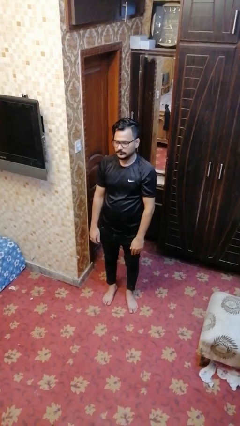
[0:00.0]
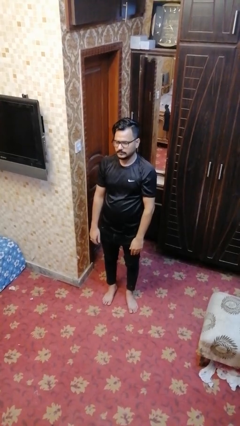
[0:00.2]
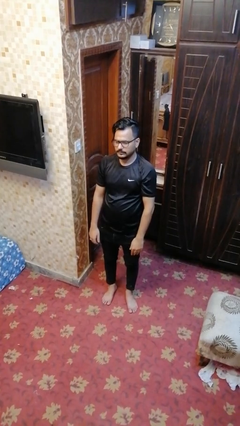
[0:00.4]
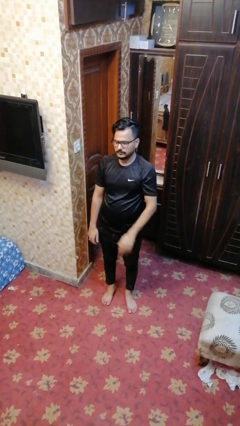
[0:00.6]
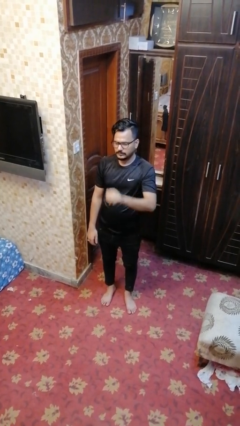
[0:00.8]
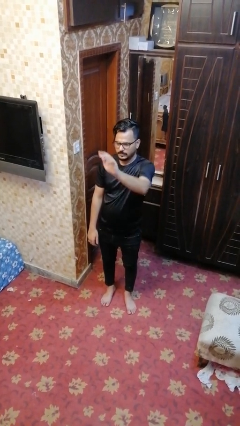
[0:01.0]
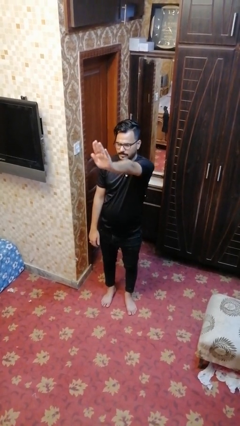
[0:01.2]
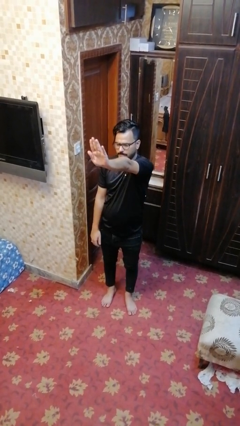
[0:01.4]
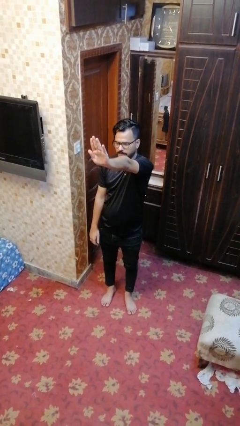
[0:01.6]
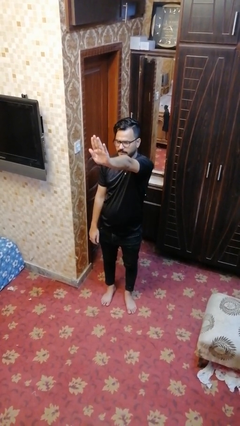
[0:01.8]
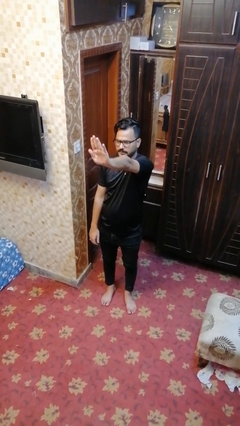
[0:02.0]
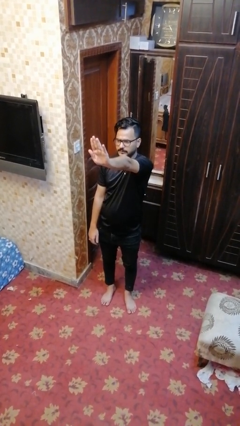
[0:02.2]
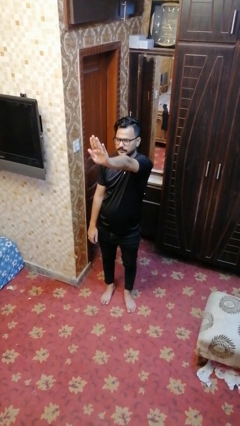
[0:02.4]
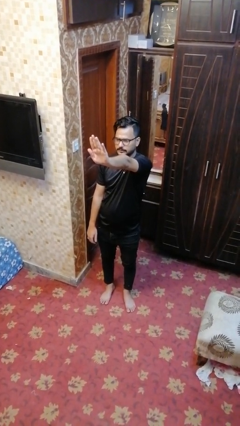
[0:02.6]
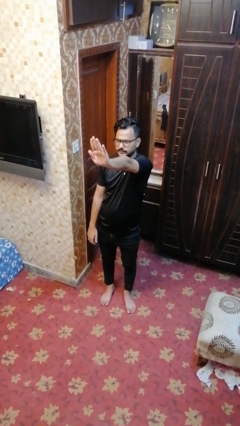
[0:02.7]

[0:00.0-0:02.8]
person gestures stop

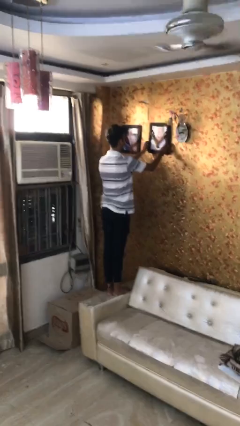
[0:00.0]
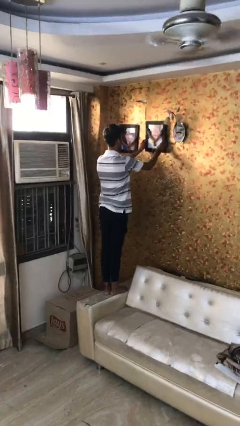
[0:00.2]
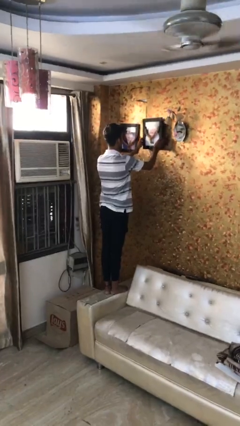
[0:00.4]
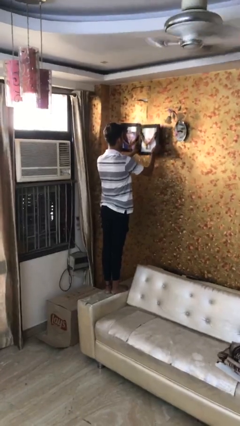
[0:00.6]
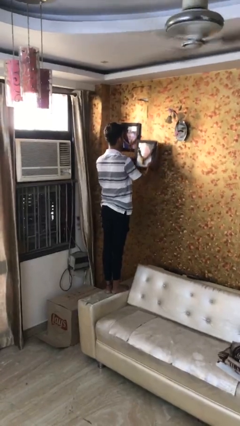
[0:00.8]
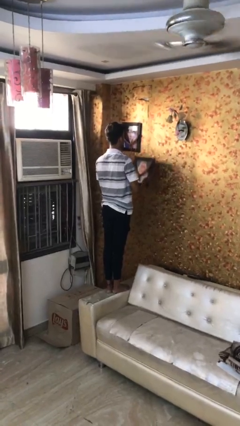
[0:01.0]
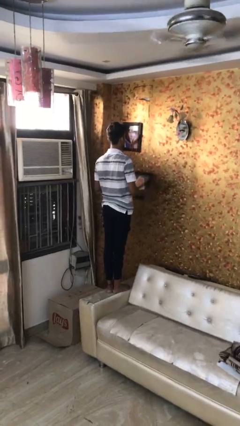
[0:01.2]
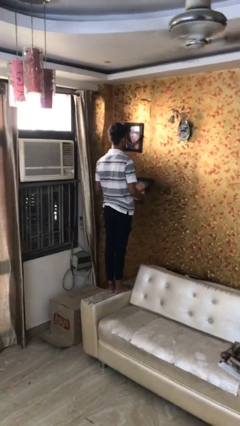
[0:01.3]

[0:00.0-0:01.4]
person takes down picture frame

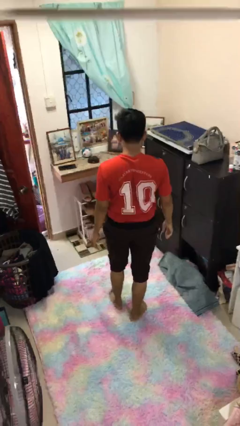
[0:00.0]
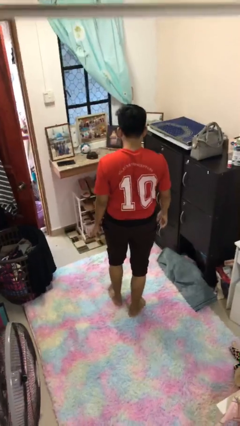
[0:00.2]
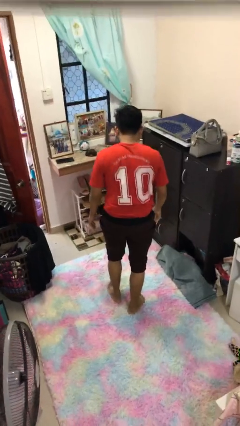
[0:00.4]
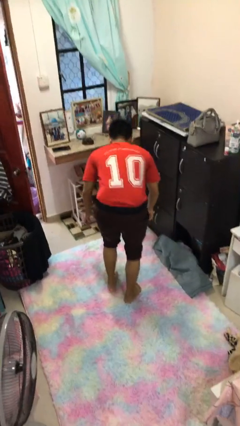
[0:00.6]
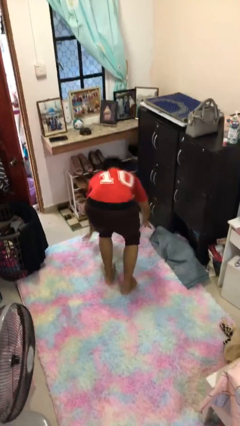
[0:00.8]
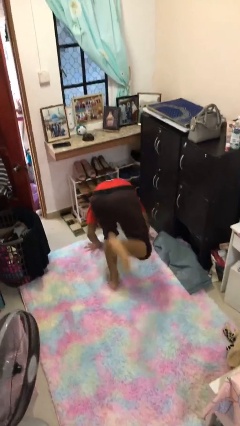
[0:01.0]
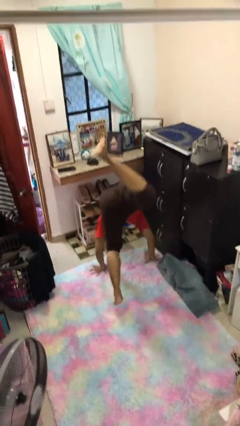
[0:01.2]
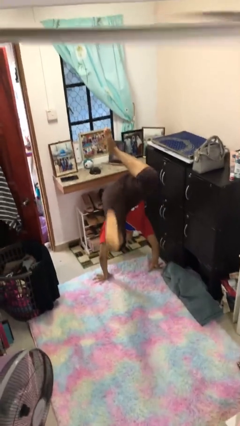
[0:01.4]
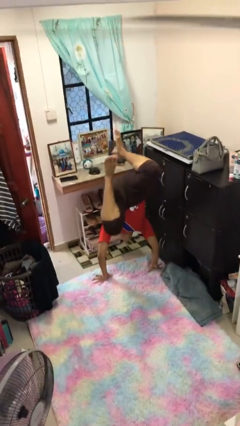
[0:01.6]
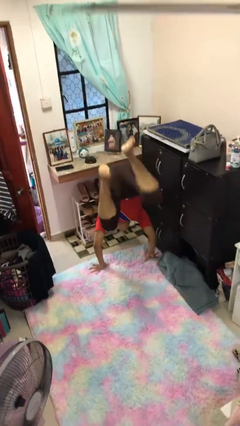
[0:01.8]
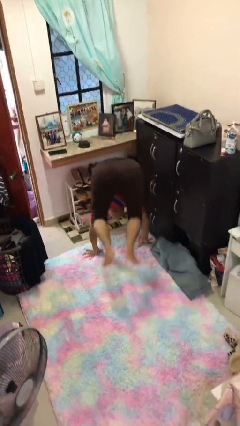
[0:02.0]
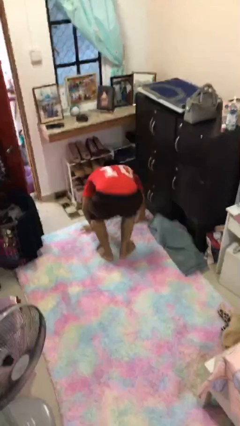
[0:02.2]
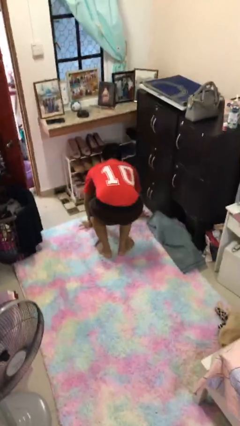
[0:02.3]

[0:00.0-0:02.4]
person handstand

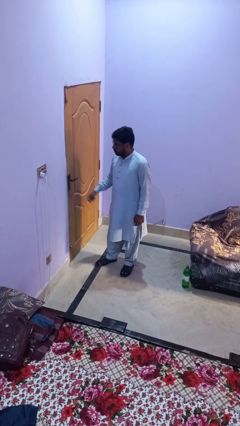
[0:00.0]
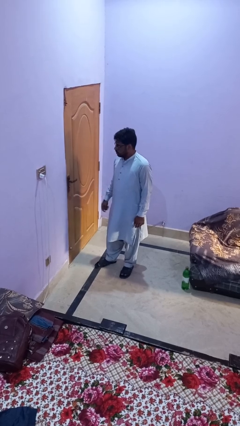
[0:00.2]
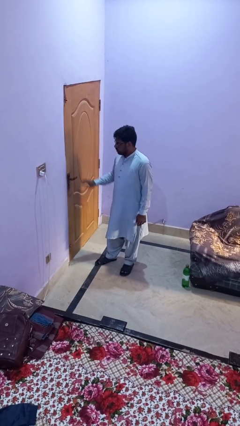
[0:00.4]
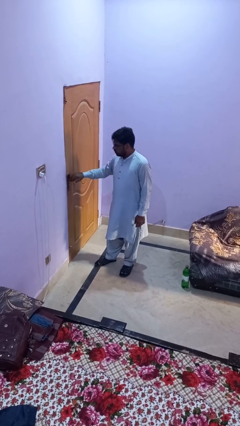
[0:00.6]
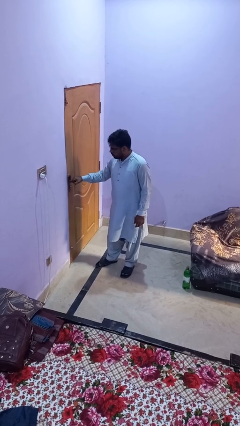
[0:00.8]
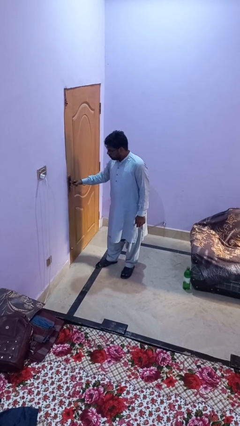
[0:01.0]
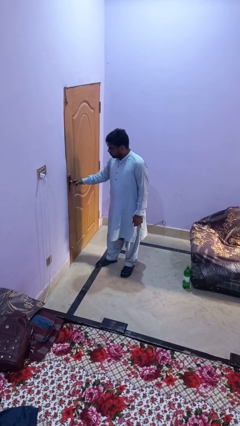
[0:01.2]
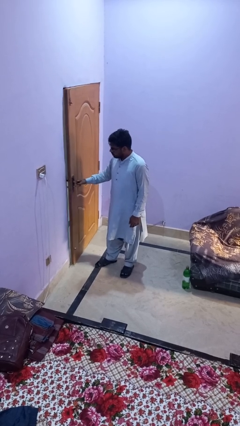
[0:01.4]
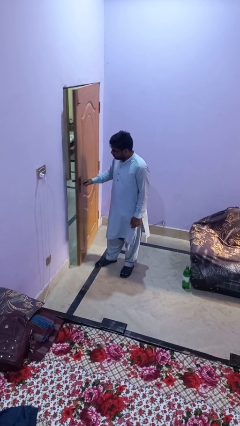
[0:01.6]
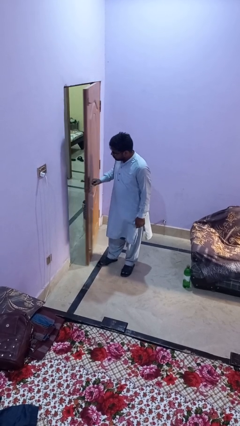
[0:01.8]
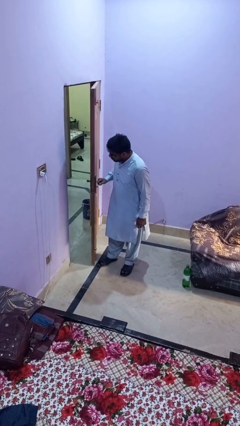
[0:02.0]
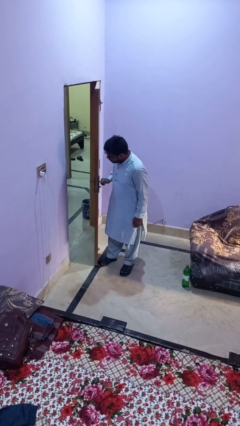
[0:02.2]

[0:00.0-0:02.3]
person opens facility door

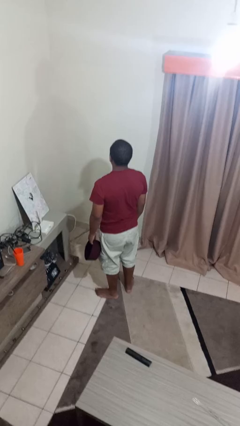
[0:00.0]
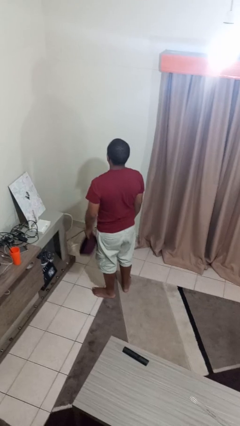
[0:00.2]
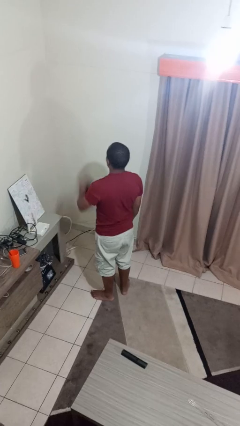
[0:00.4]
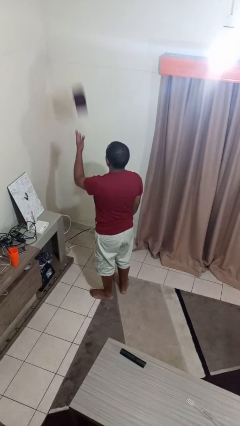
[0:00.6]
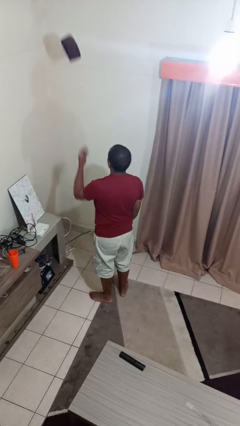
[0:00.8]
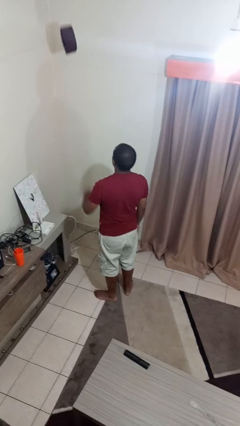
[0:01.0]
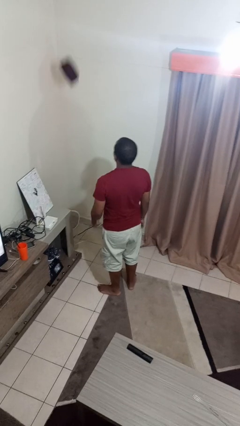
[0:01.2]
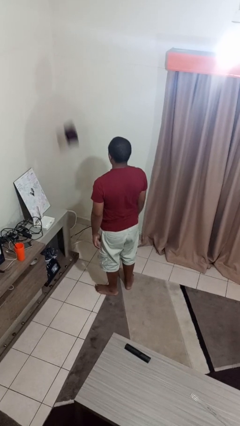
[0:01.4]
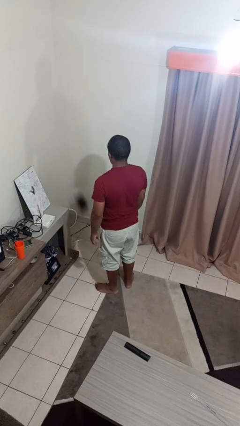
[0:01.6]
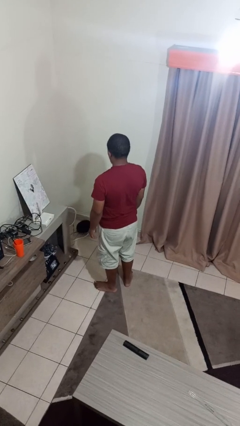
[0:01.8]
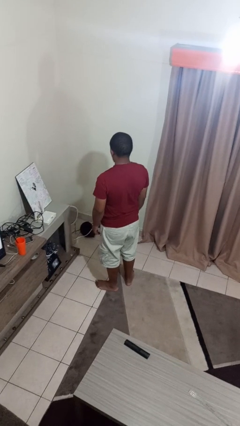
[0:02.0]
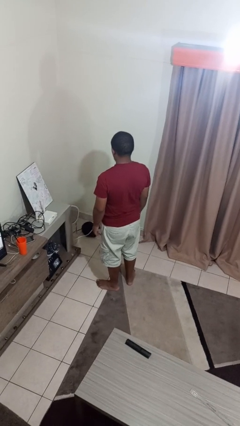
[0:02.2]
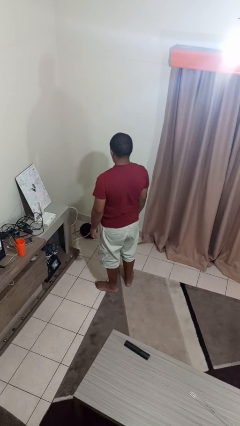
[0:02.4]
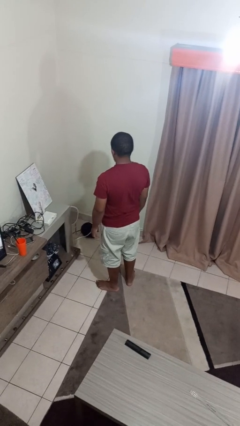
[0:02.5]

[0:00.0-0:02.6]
person throws object into air

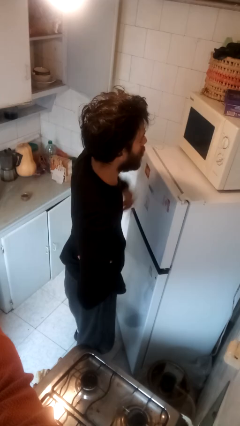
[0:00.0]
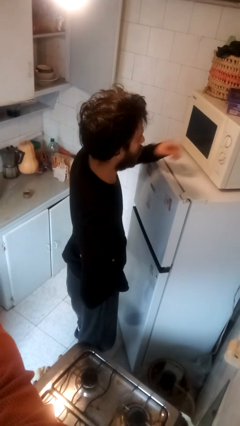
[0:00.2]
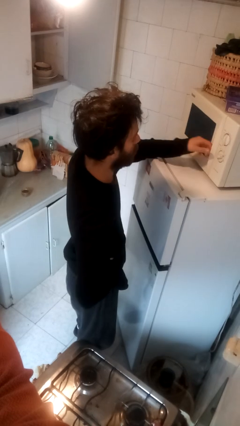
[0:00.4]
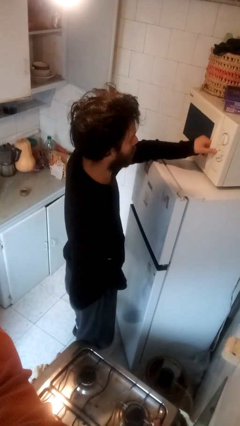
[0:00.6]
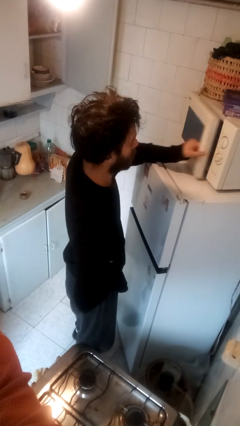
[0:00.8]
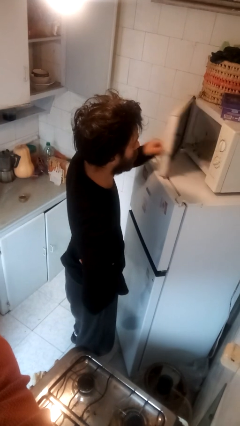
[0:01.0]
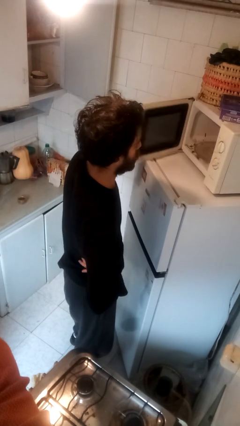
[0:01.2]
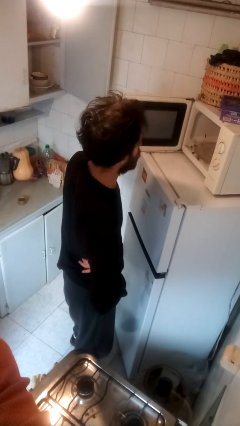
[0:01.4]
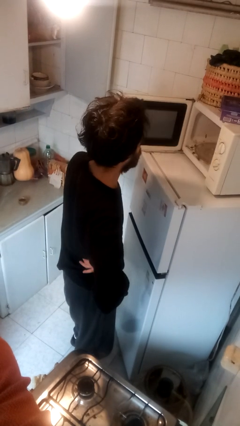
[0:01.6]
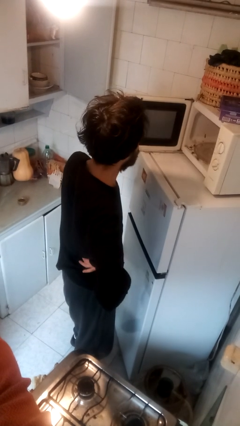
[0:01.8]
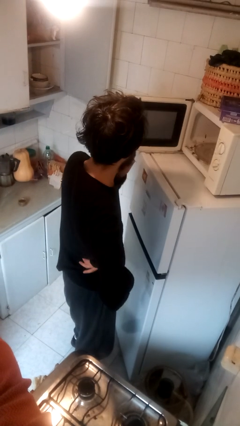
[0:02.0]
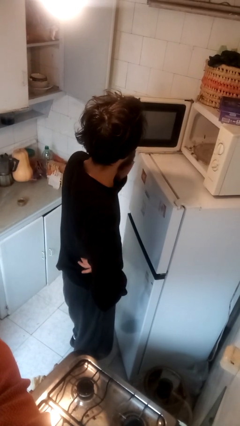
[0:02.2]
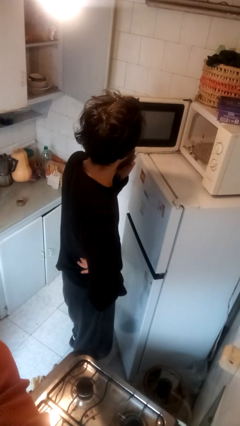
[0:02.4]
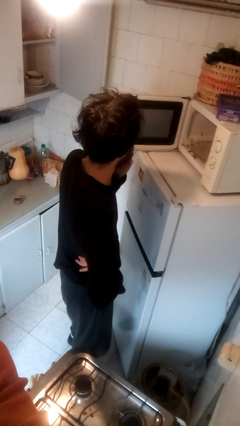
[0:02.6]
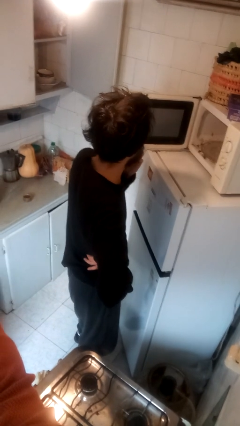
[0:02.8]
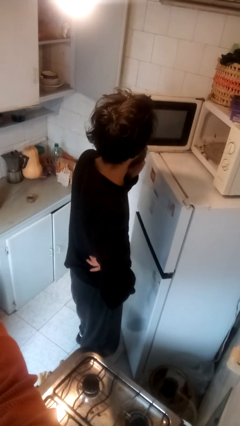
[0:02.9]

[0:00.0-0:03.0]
person opens microwave

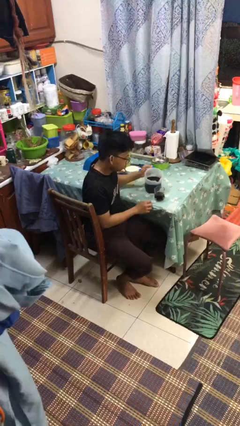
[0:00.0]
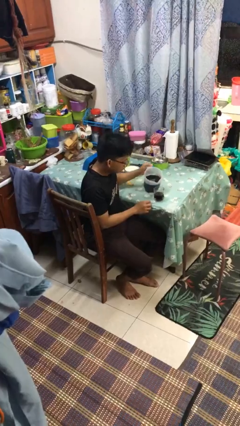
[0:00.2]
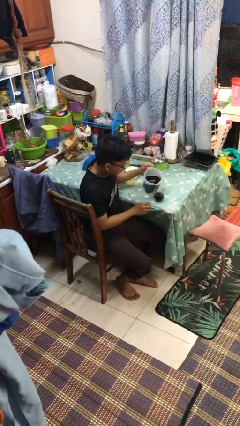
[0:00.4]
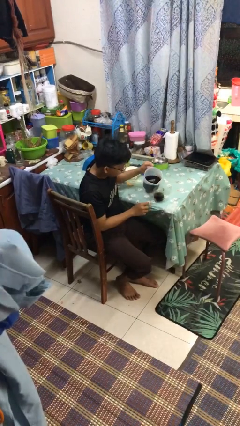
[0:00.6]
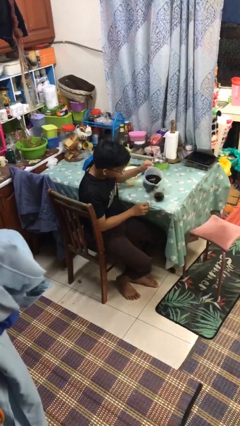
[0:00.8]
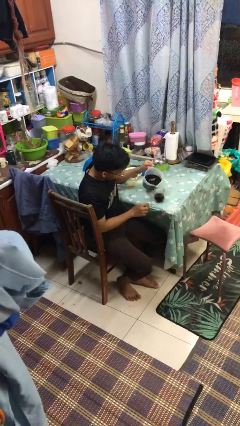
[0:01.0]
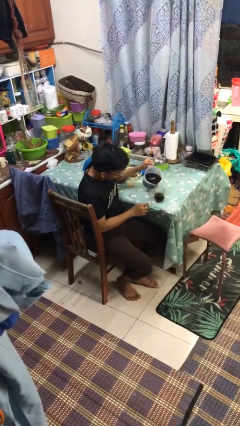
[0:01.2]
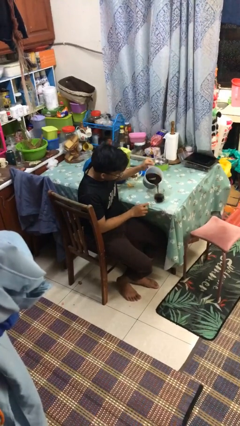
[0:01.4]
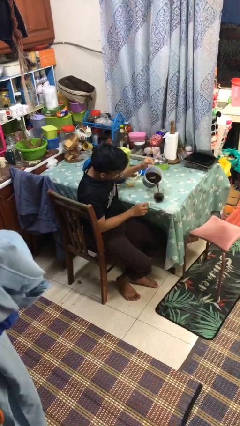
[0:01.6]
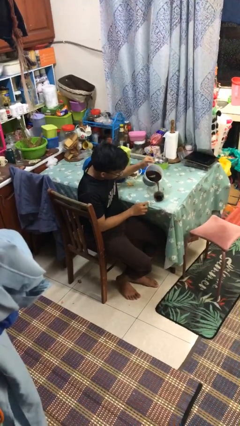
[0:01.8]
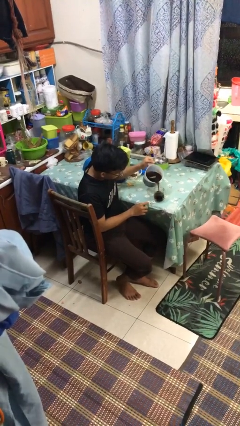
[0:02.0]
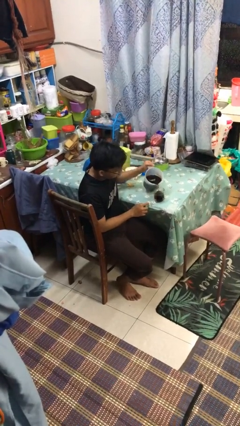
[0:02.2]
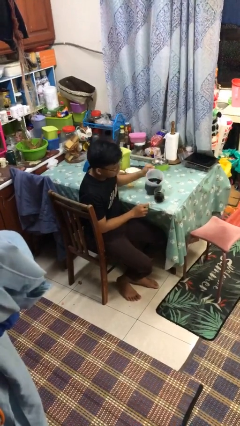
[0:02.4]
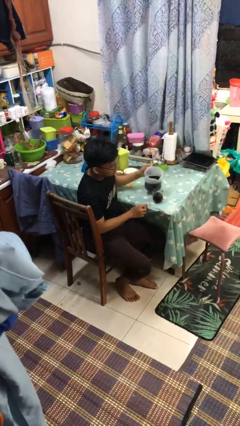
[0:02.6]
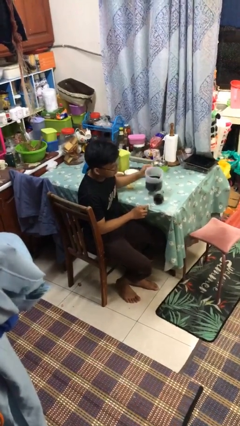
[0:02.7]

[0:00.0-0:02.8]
person pours coffee into mug
